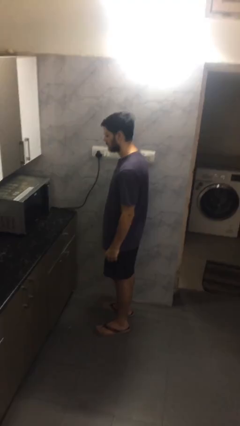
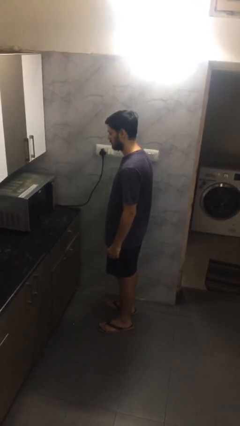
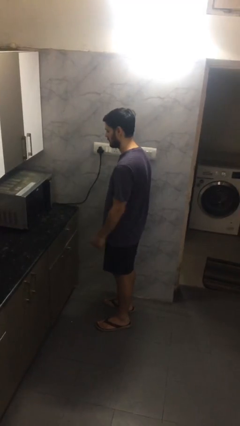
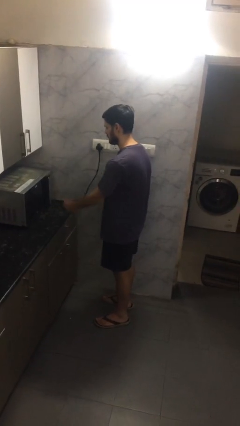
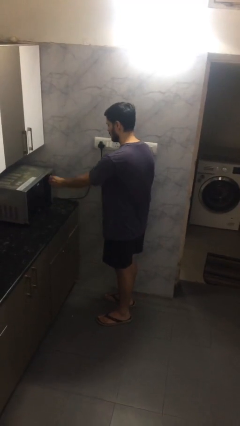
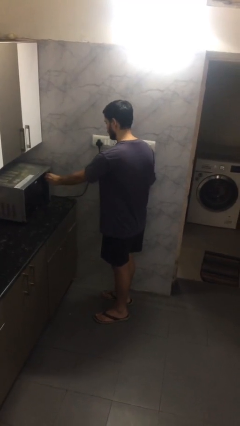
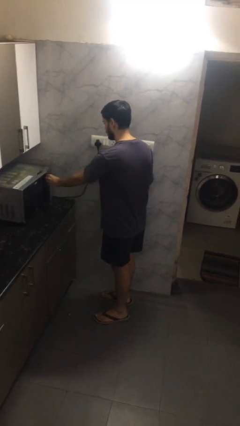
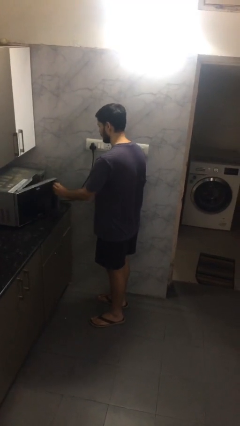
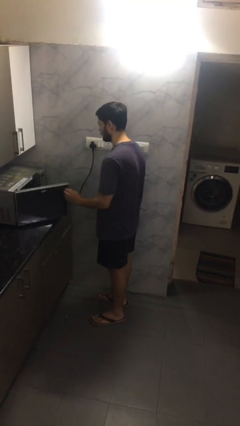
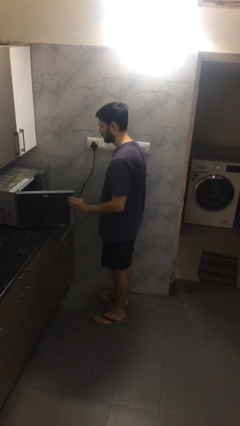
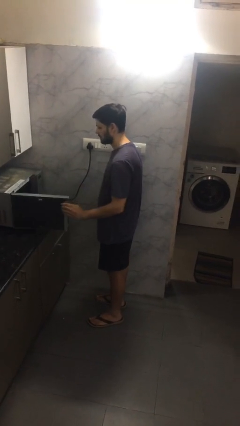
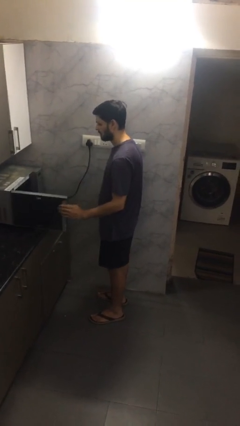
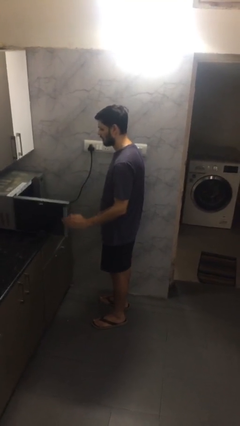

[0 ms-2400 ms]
person opens microwave

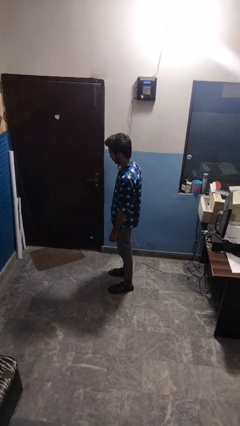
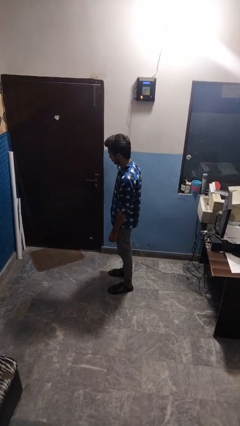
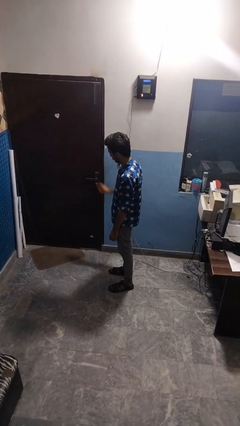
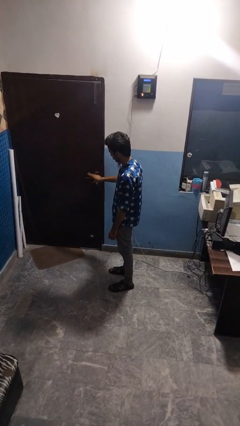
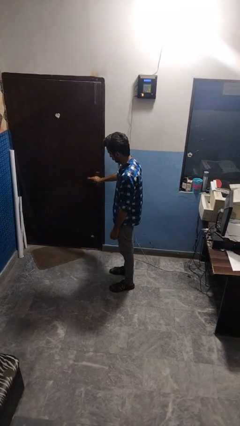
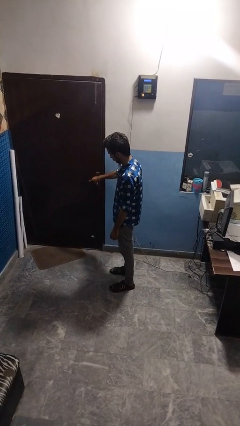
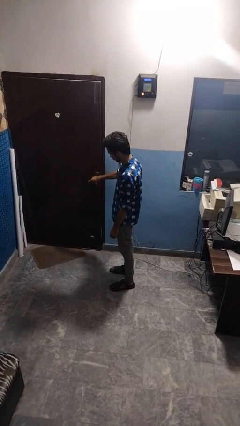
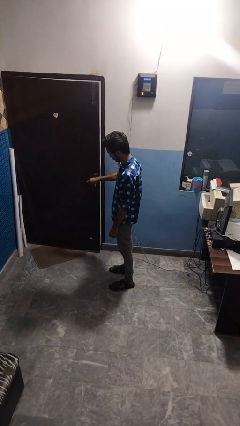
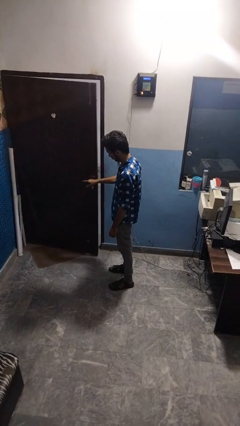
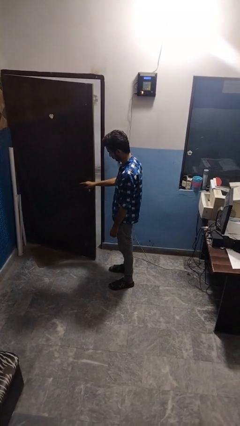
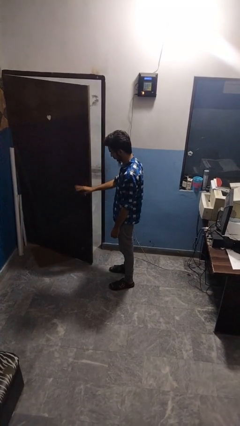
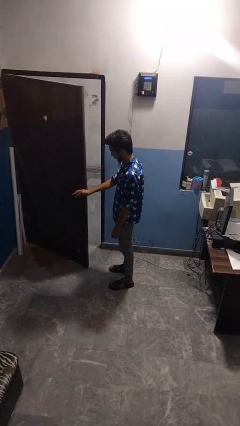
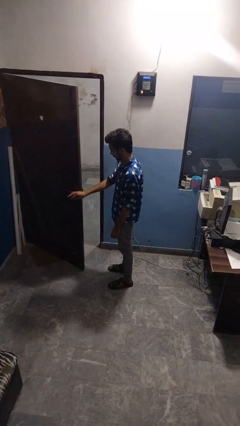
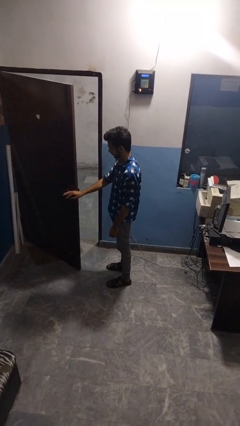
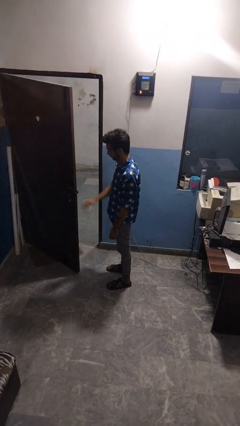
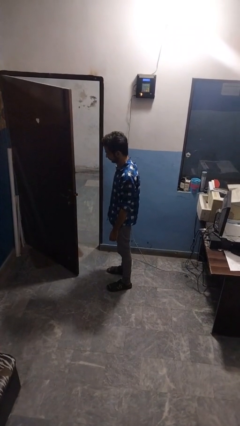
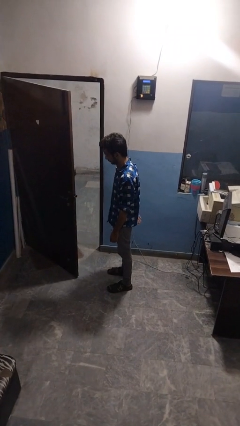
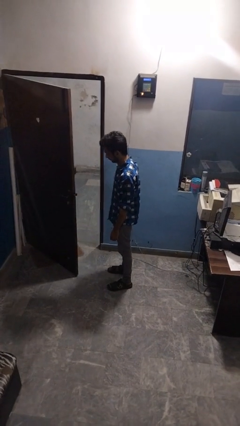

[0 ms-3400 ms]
person opens facility door

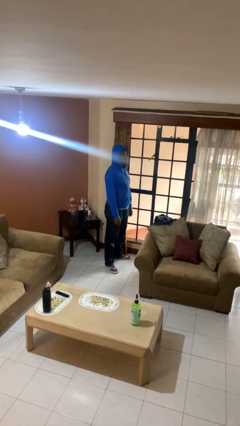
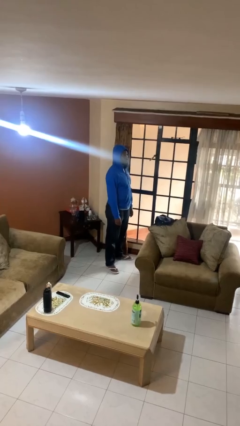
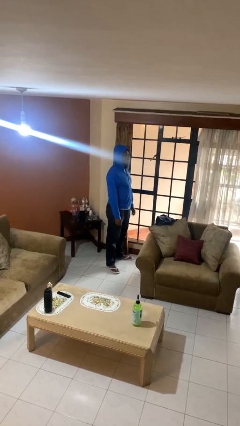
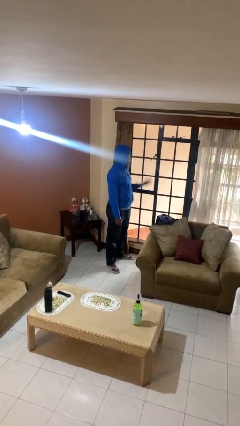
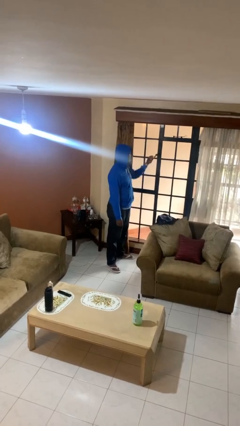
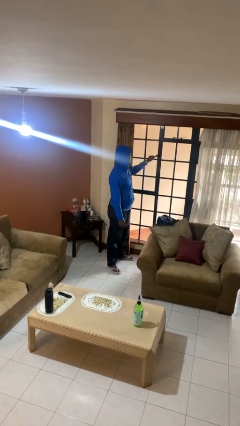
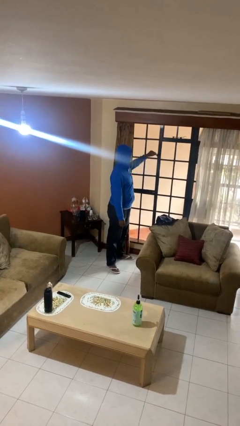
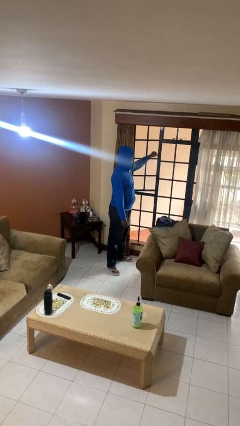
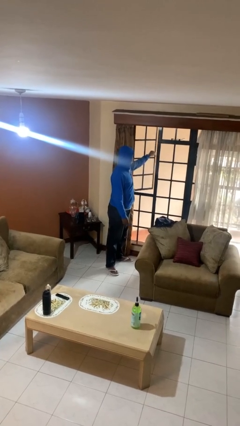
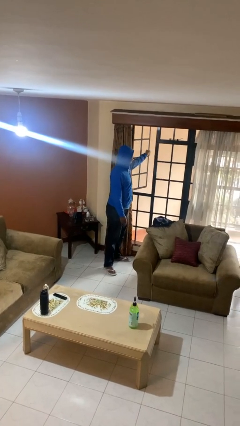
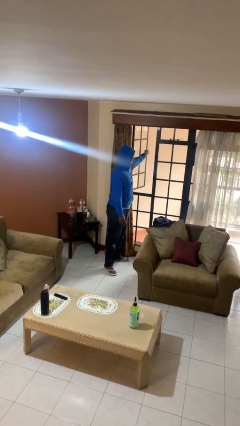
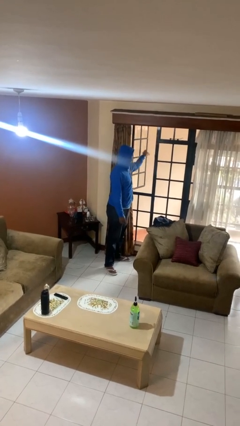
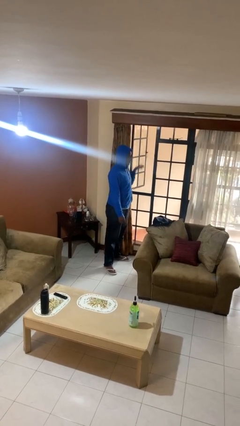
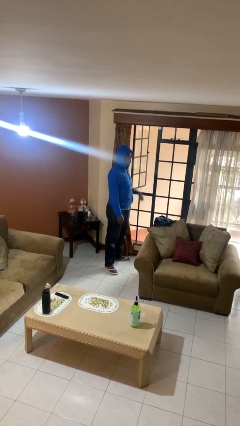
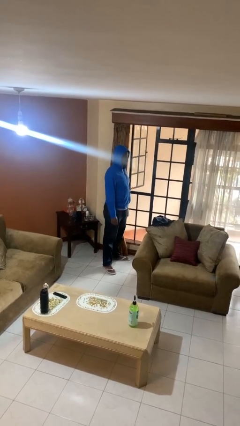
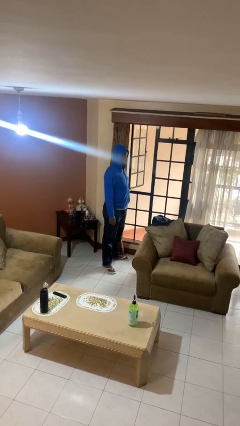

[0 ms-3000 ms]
person opens home window

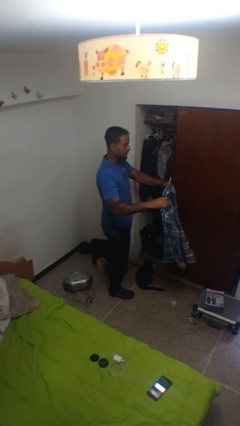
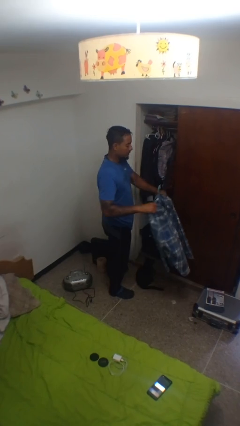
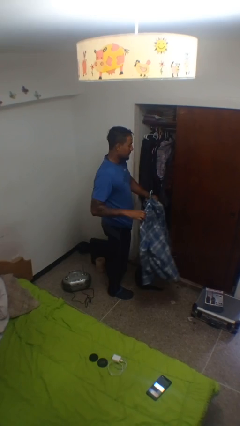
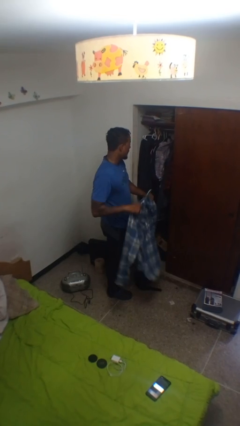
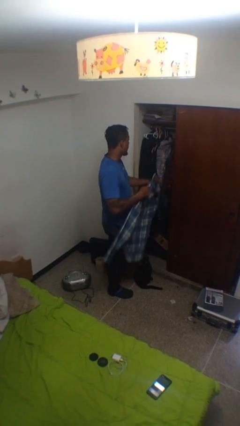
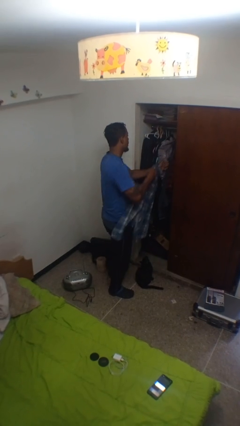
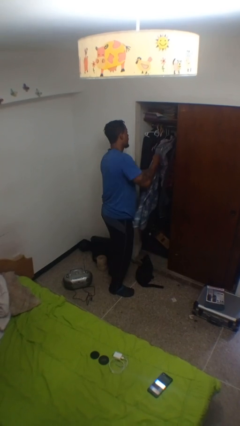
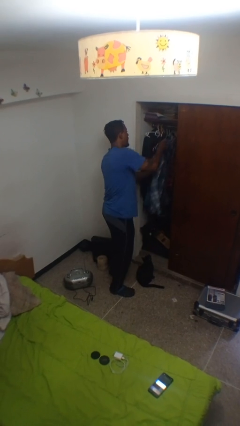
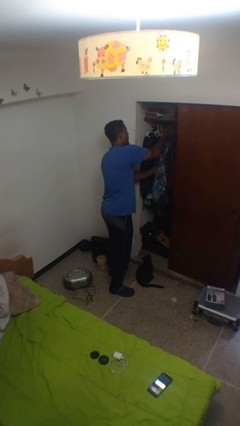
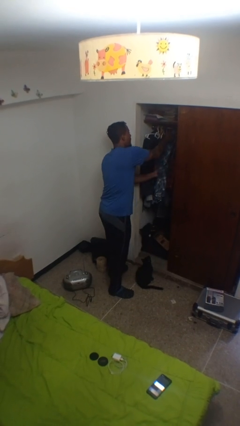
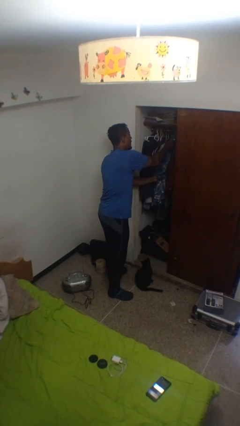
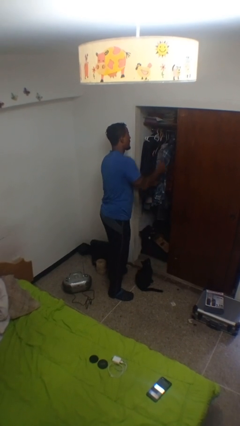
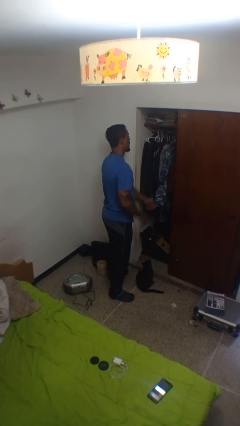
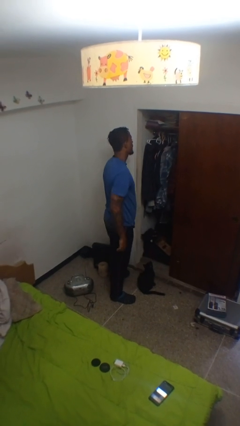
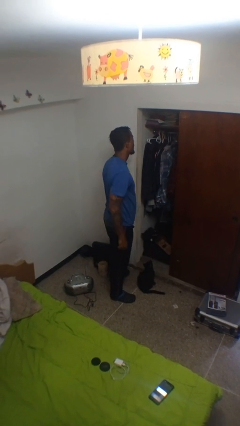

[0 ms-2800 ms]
person puts clothes into closet

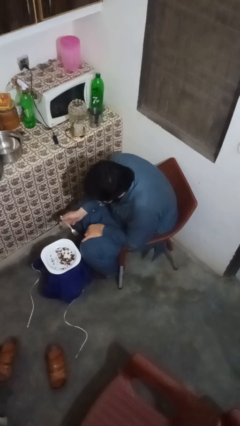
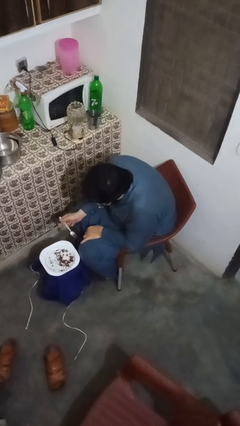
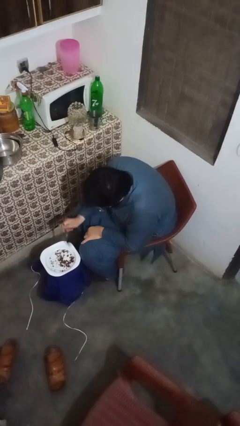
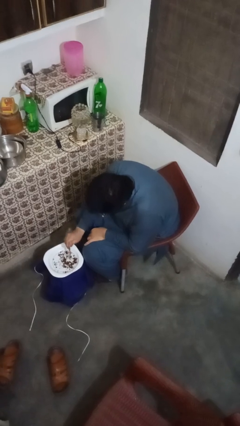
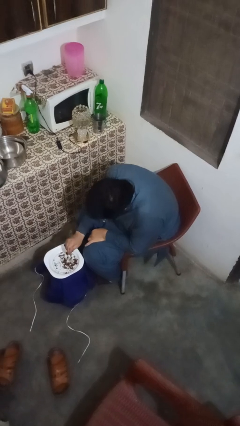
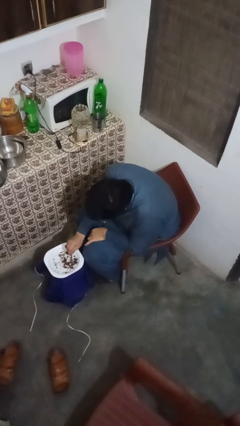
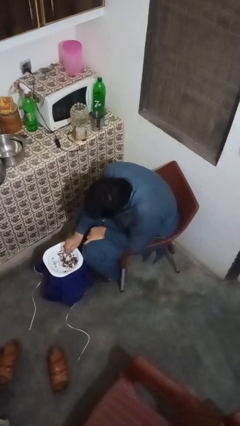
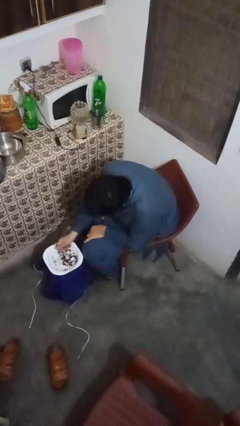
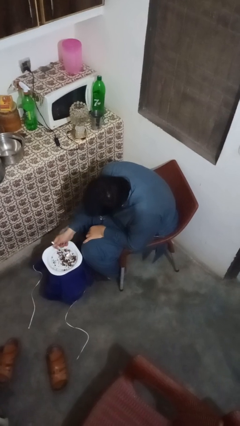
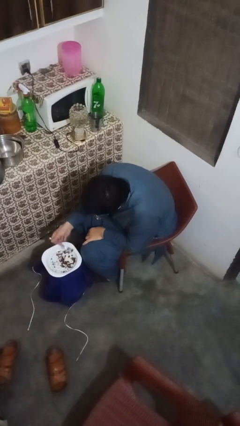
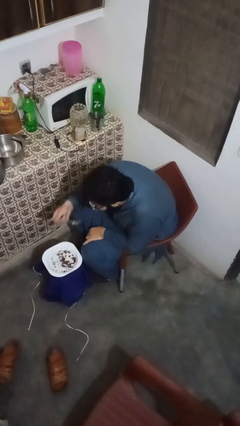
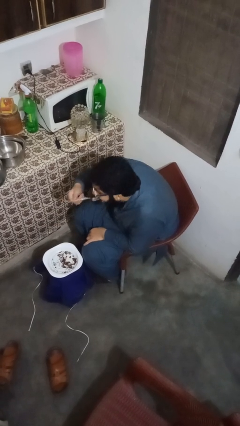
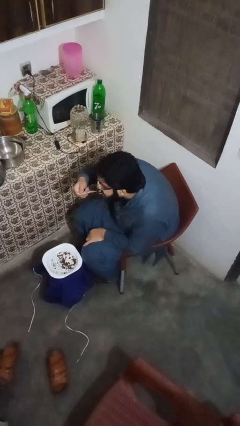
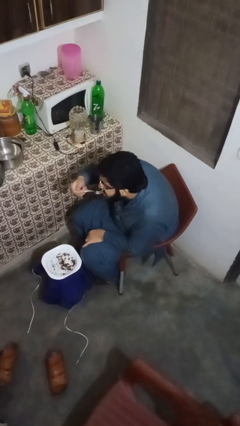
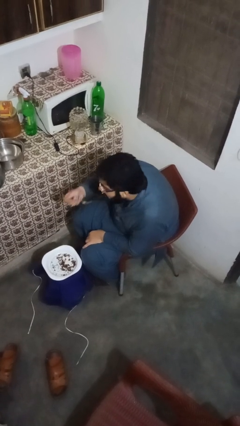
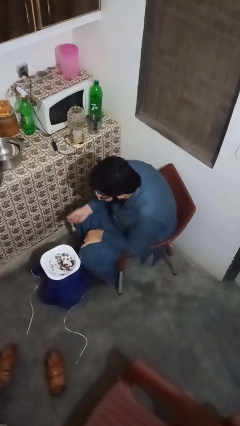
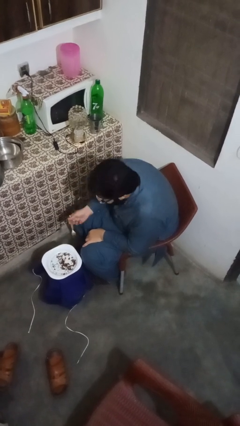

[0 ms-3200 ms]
person eats with utensil

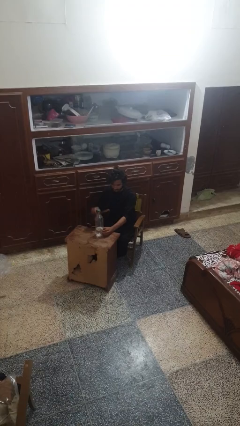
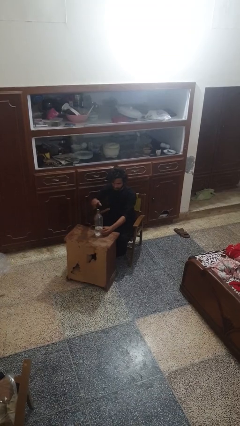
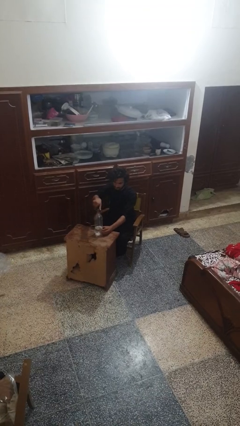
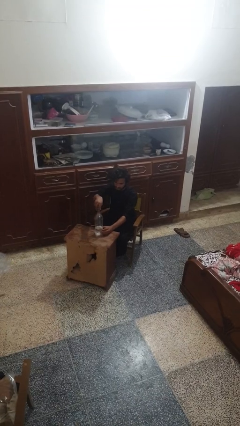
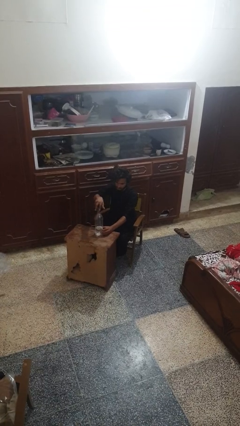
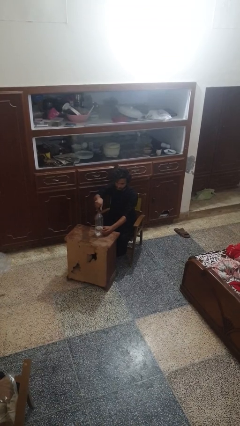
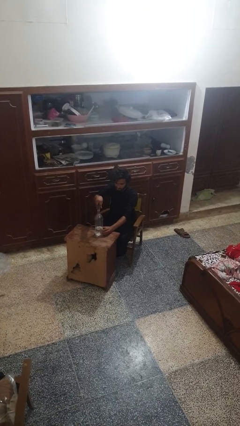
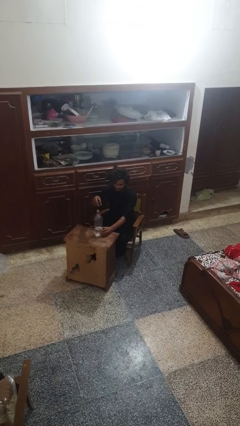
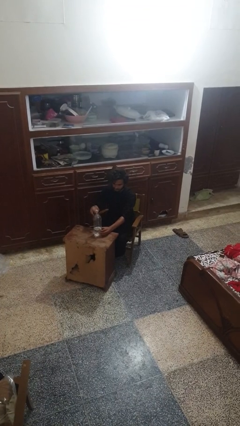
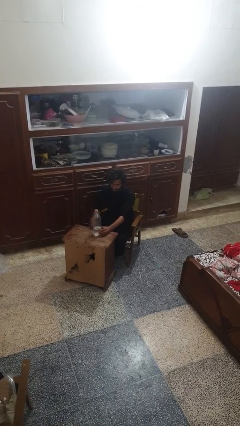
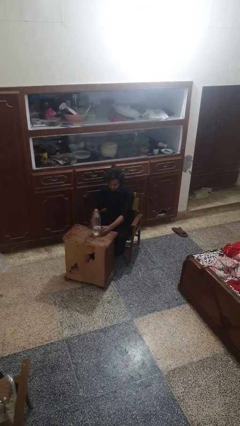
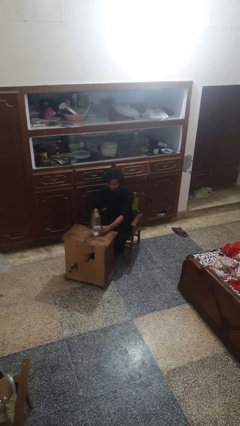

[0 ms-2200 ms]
person unscrews lid from bottle

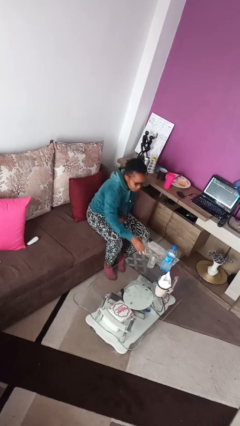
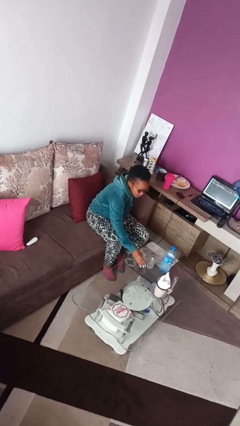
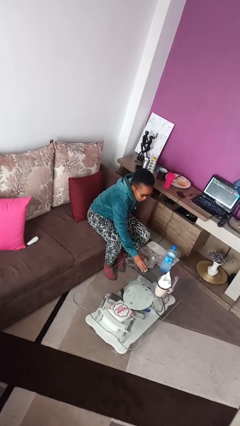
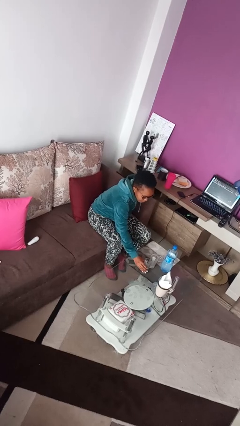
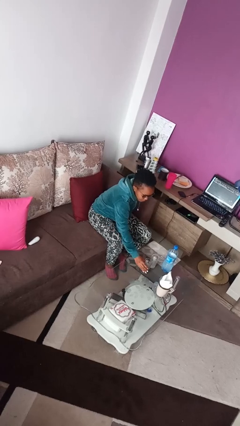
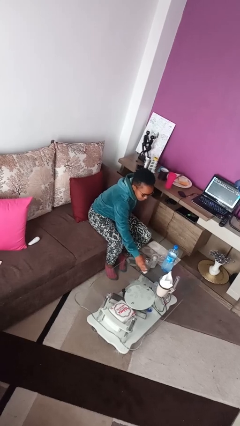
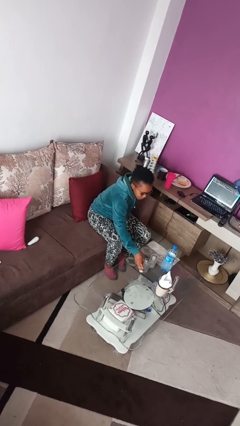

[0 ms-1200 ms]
person puts down object on table
